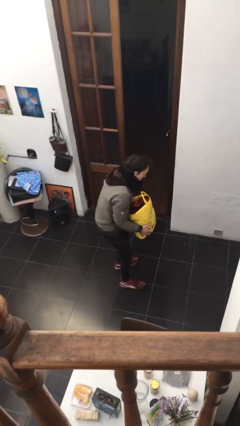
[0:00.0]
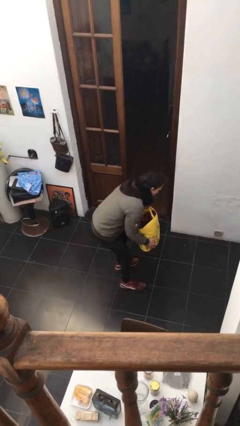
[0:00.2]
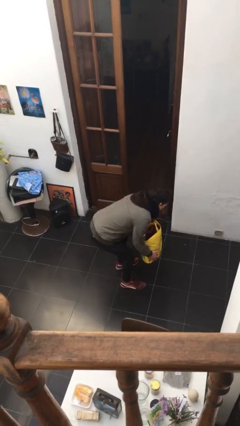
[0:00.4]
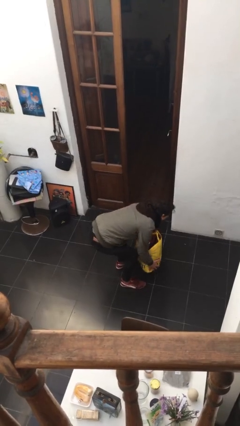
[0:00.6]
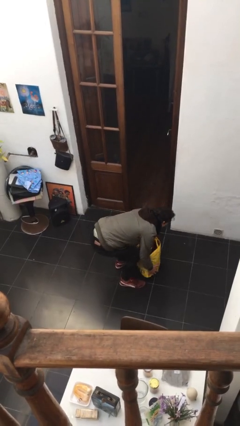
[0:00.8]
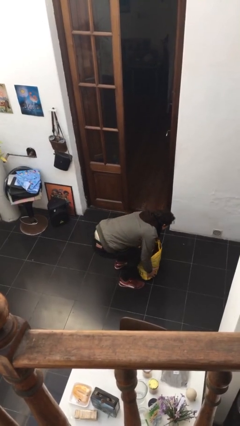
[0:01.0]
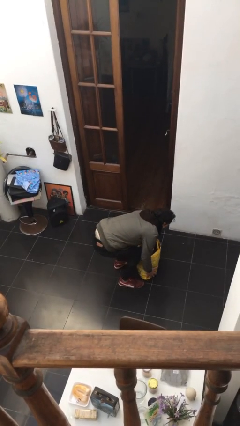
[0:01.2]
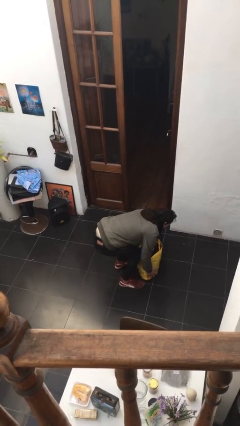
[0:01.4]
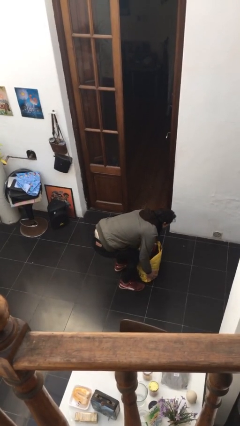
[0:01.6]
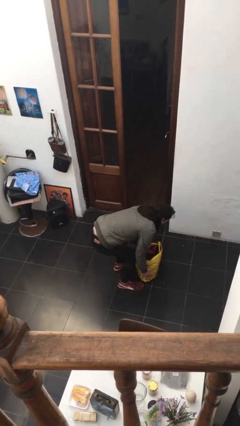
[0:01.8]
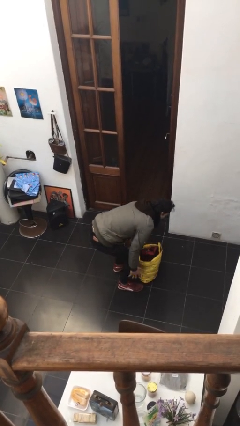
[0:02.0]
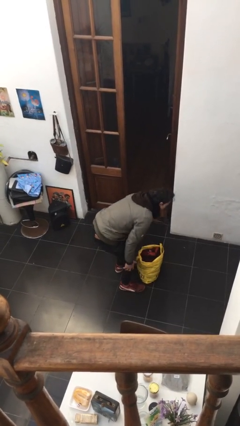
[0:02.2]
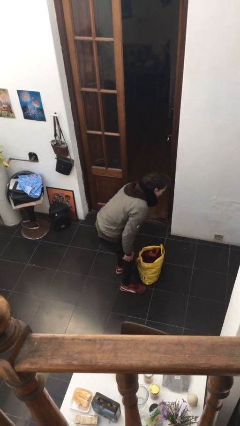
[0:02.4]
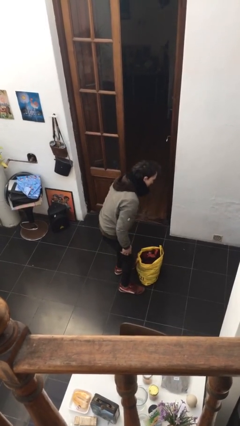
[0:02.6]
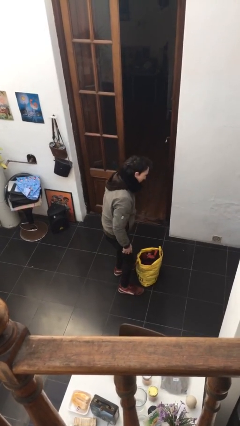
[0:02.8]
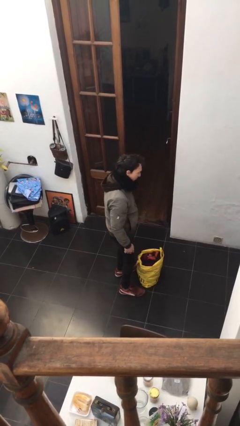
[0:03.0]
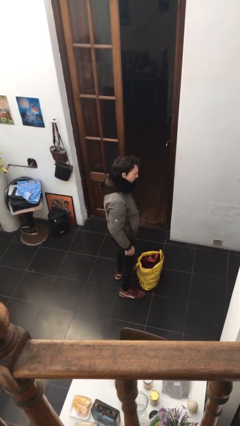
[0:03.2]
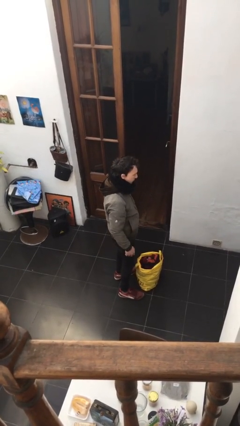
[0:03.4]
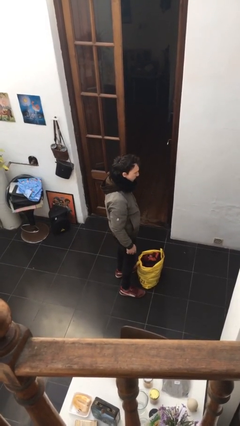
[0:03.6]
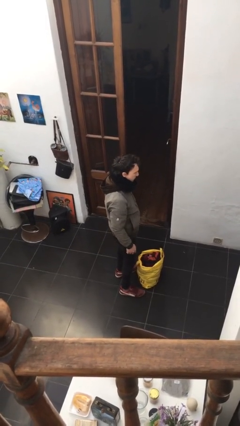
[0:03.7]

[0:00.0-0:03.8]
person puts down object on floor

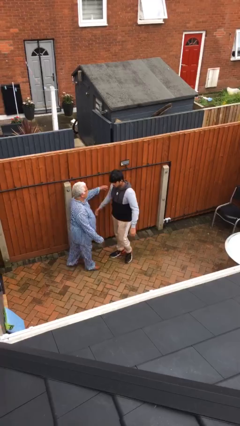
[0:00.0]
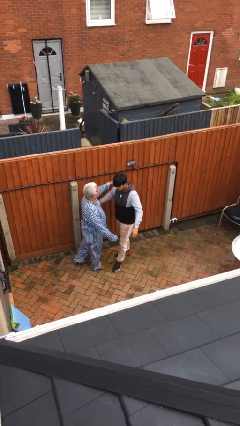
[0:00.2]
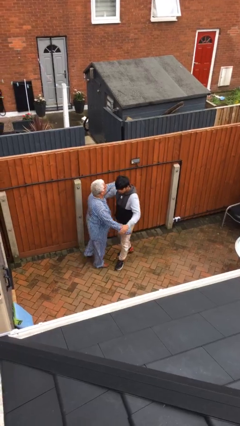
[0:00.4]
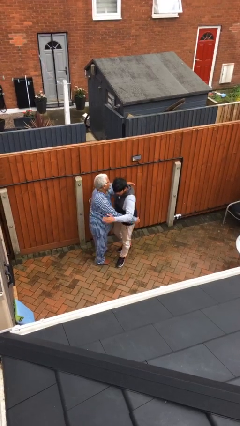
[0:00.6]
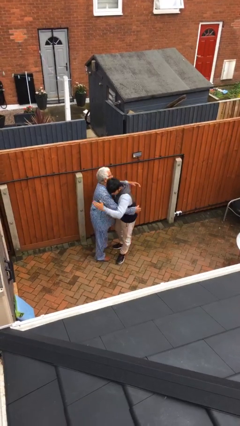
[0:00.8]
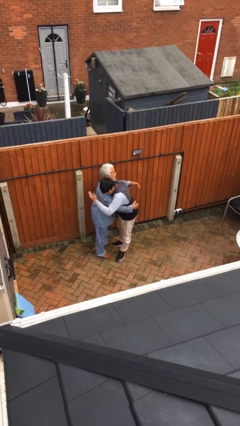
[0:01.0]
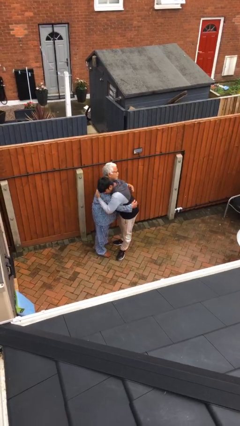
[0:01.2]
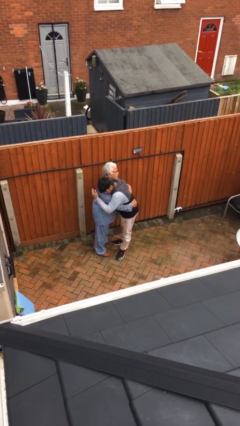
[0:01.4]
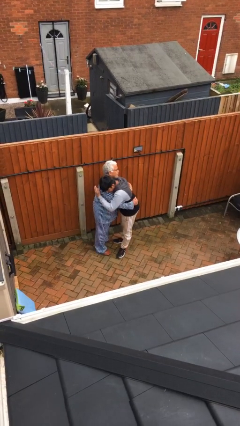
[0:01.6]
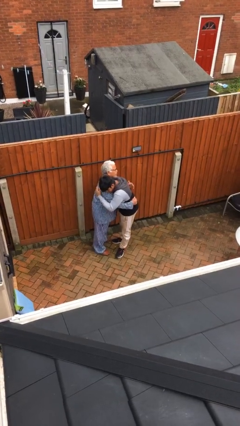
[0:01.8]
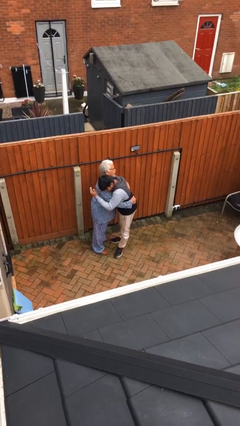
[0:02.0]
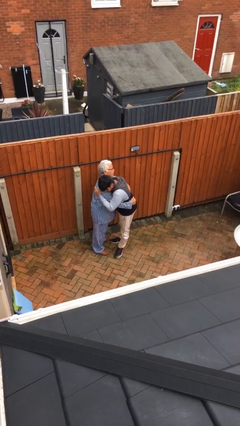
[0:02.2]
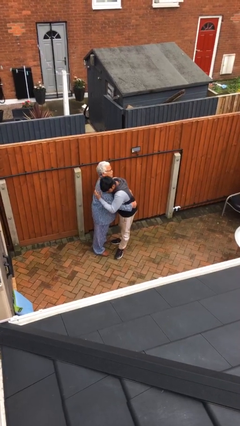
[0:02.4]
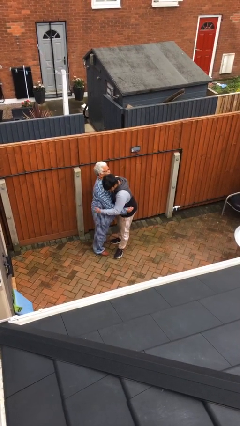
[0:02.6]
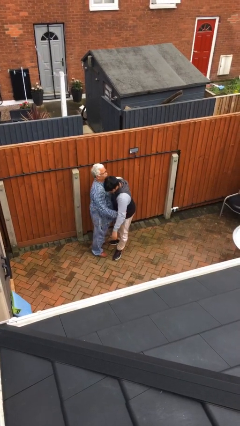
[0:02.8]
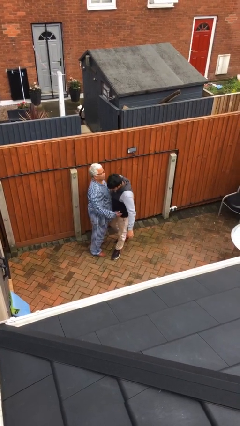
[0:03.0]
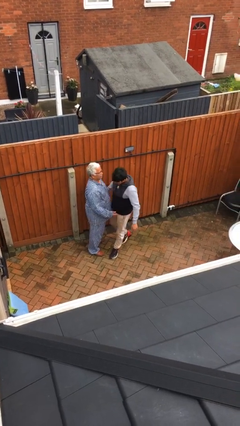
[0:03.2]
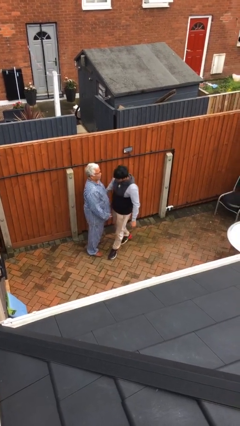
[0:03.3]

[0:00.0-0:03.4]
person embraces person

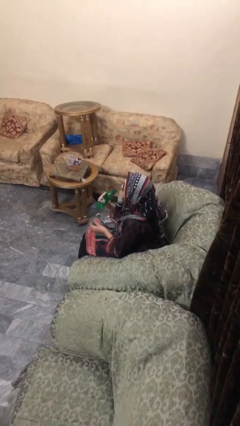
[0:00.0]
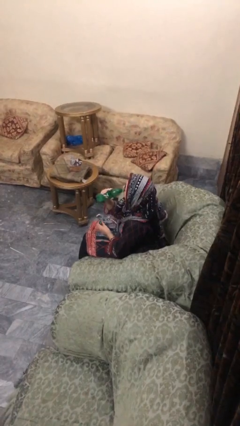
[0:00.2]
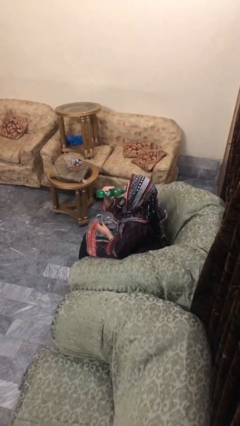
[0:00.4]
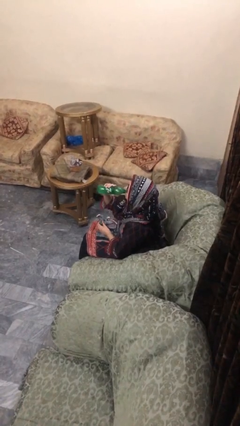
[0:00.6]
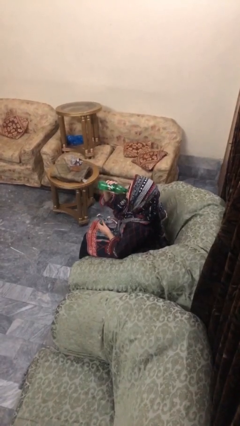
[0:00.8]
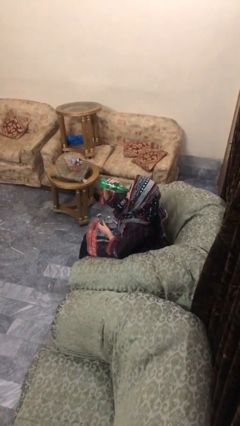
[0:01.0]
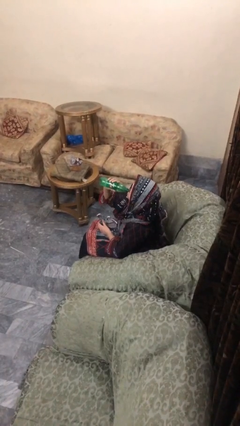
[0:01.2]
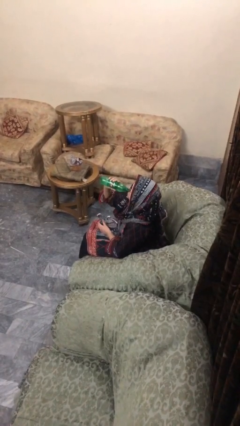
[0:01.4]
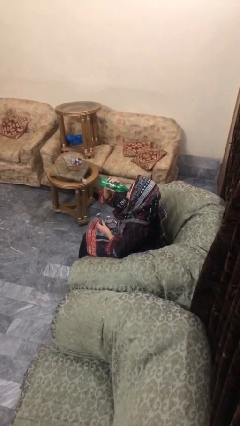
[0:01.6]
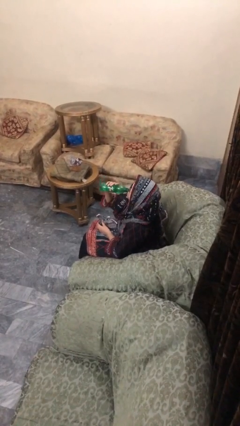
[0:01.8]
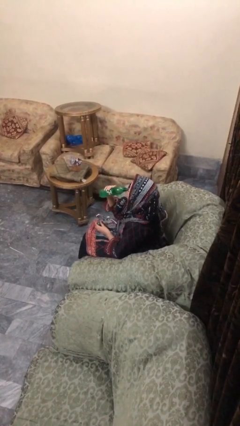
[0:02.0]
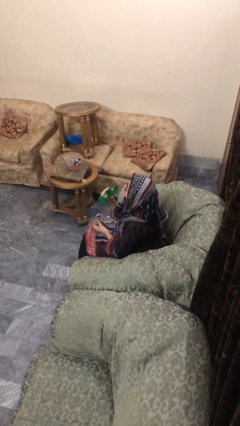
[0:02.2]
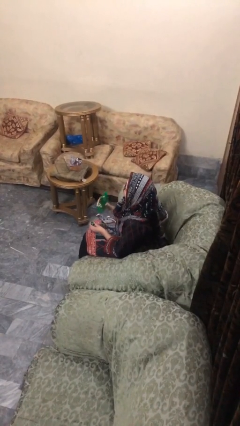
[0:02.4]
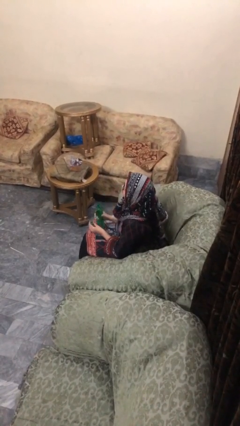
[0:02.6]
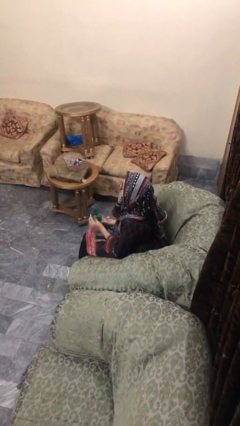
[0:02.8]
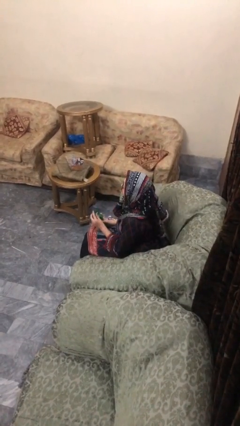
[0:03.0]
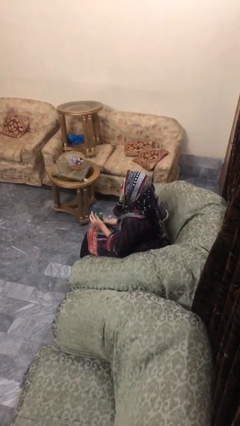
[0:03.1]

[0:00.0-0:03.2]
person drinks from bottle

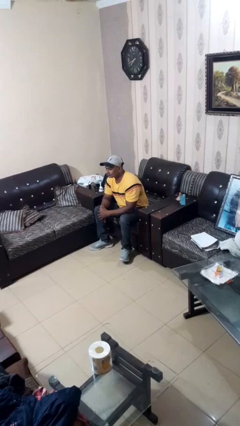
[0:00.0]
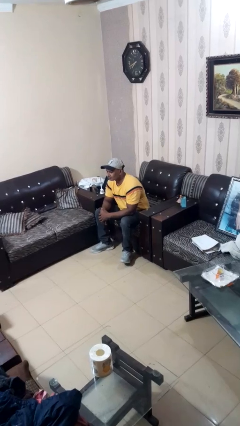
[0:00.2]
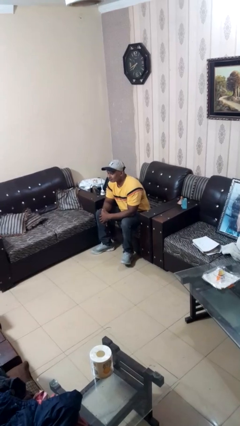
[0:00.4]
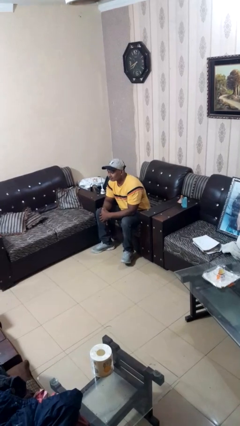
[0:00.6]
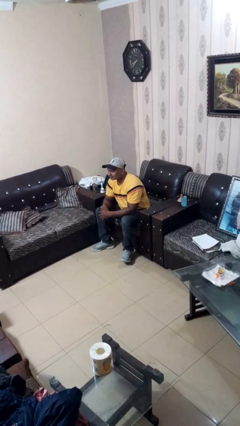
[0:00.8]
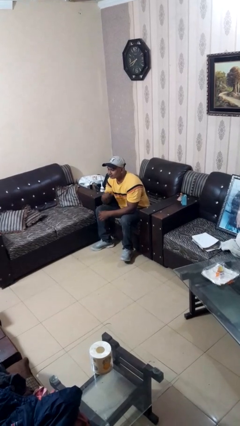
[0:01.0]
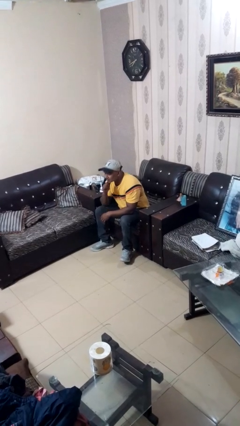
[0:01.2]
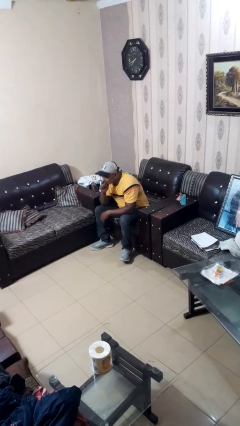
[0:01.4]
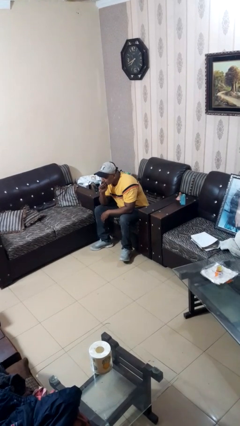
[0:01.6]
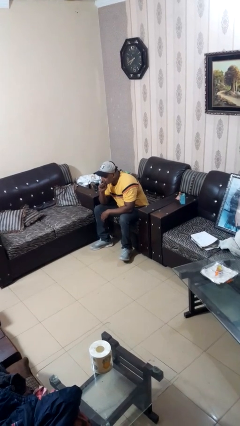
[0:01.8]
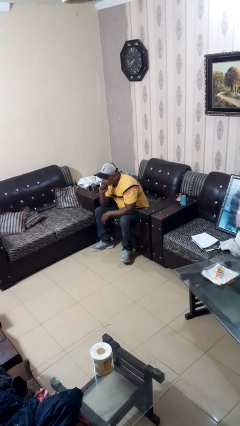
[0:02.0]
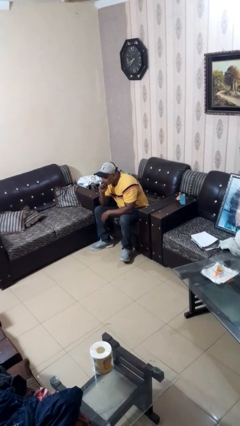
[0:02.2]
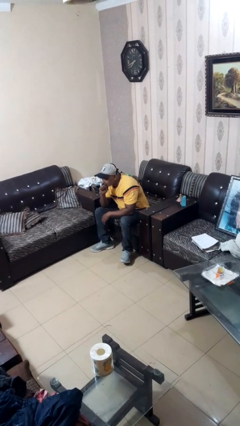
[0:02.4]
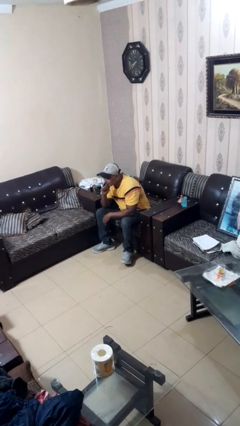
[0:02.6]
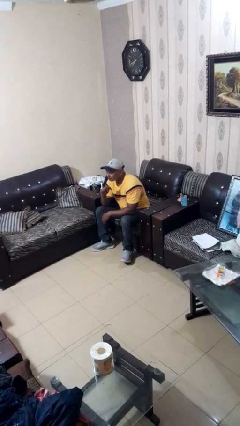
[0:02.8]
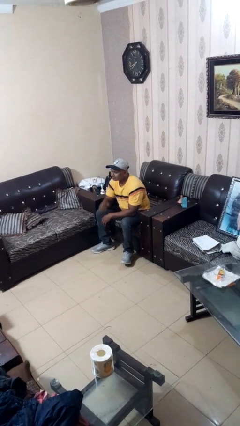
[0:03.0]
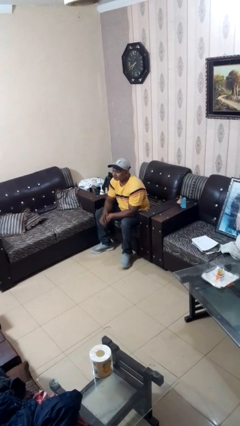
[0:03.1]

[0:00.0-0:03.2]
person strokes chin

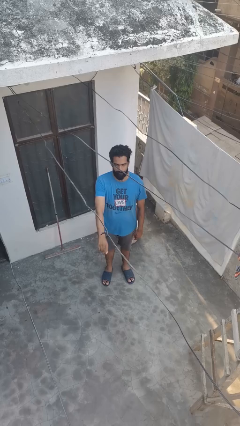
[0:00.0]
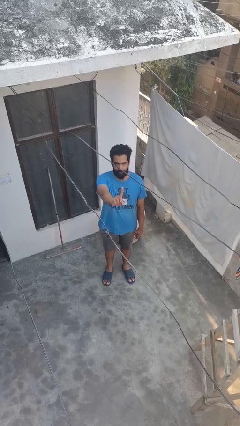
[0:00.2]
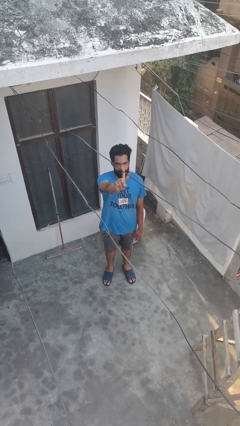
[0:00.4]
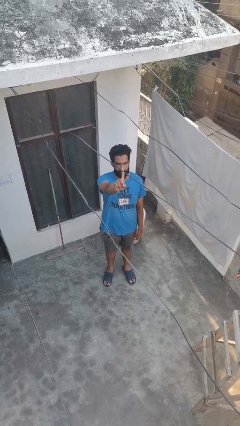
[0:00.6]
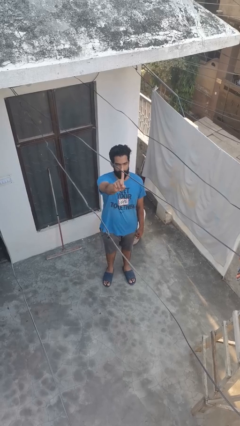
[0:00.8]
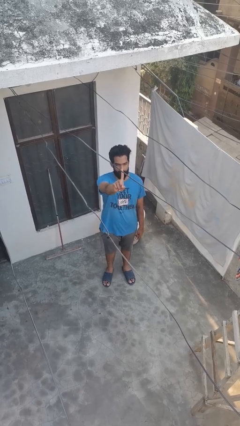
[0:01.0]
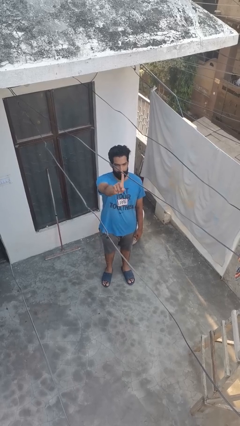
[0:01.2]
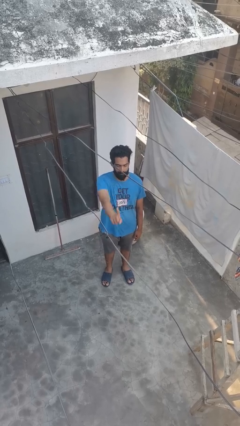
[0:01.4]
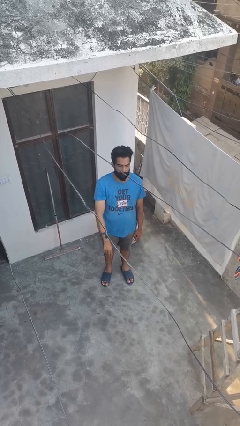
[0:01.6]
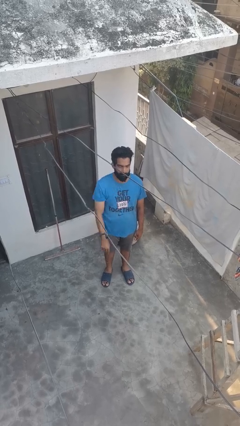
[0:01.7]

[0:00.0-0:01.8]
person gestures number one

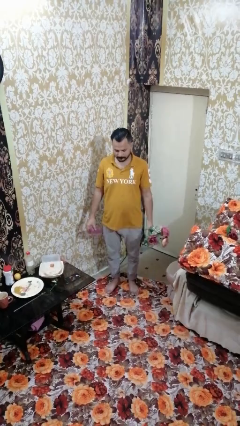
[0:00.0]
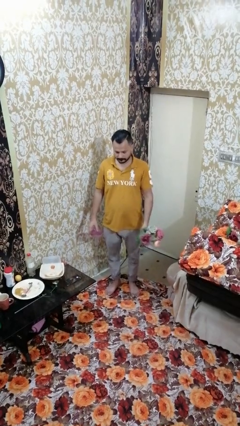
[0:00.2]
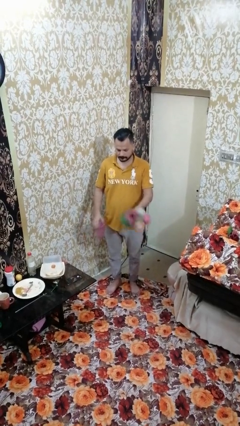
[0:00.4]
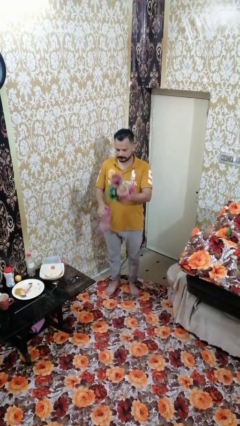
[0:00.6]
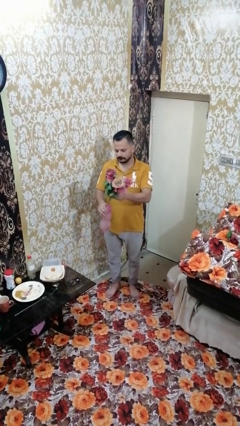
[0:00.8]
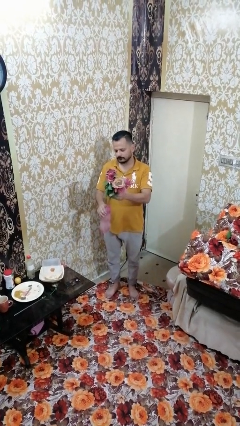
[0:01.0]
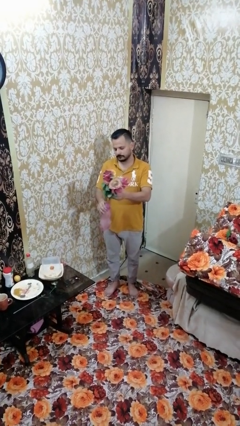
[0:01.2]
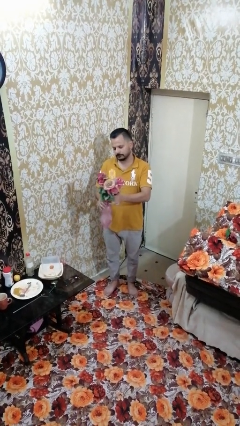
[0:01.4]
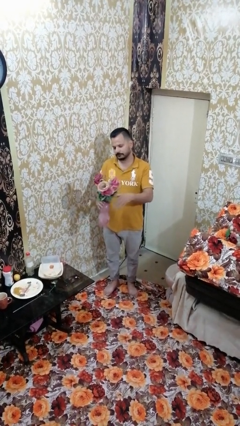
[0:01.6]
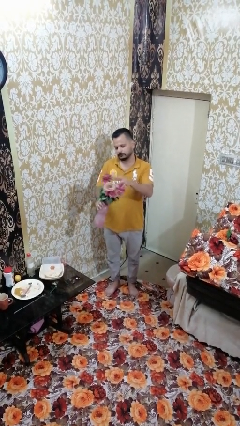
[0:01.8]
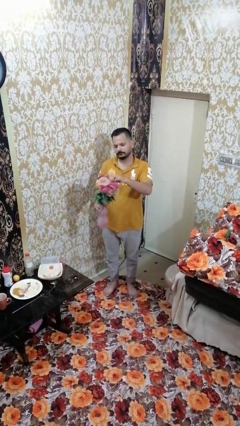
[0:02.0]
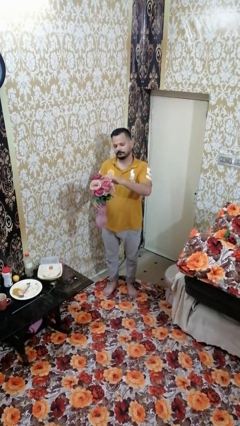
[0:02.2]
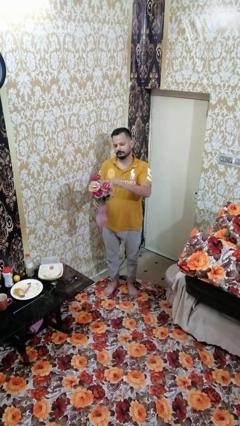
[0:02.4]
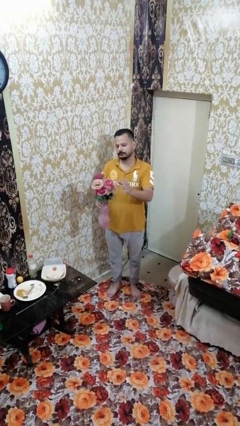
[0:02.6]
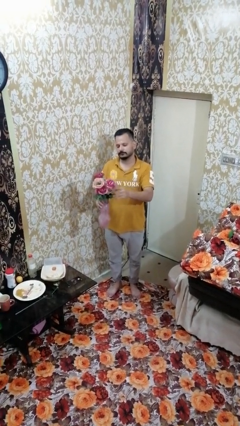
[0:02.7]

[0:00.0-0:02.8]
person arranges flowers in vase
